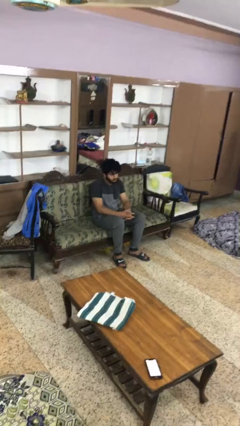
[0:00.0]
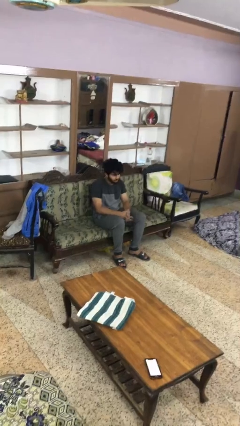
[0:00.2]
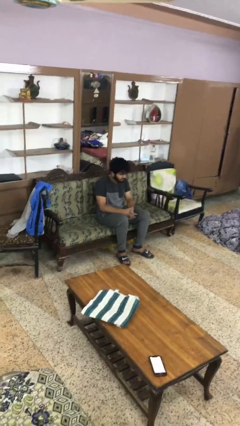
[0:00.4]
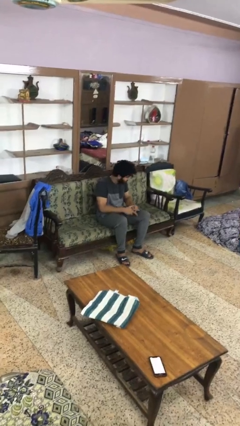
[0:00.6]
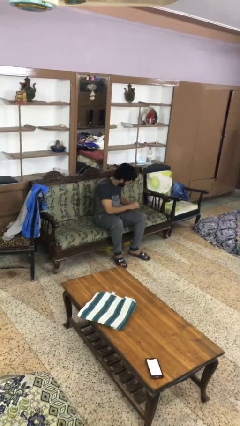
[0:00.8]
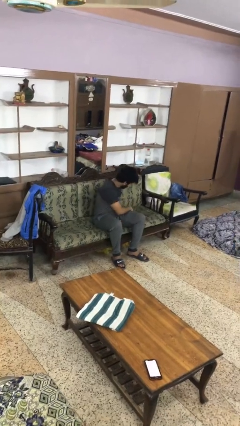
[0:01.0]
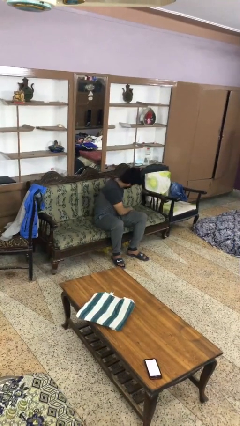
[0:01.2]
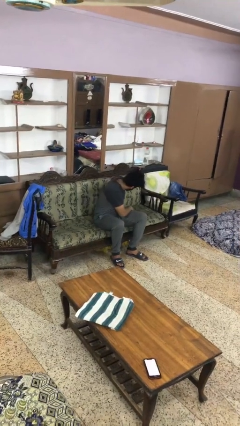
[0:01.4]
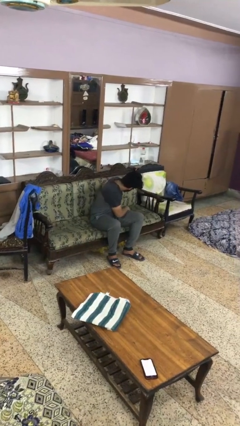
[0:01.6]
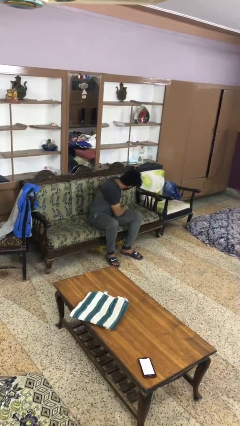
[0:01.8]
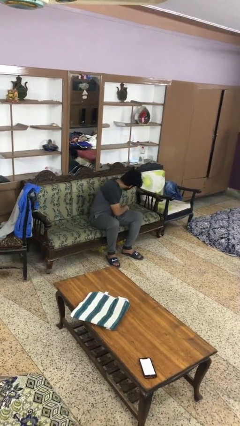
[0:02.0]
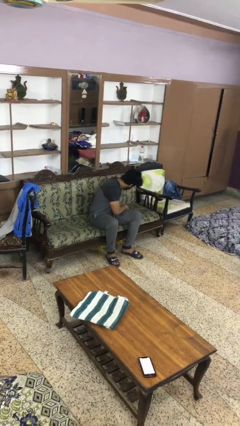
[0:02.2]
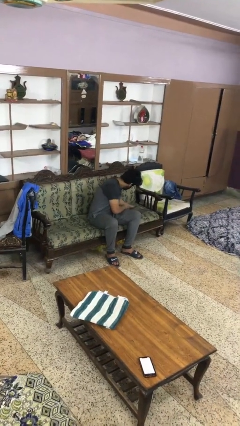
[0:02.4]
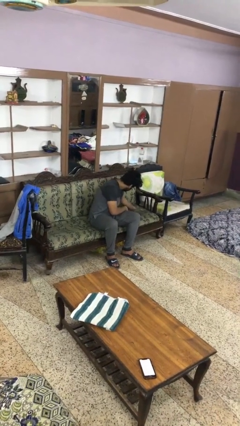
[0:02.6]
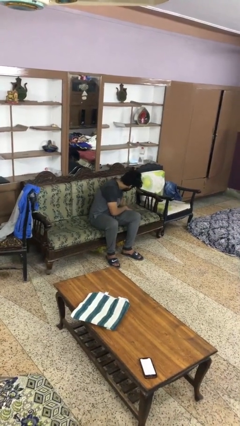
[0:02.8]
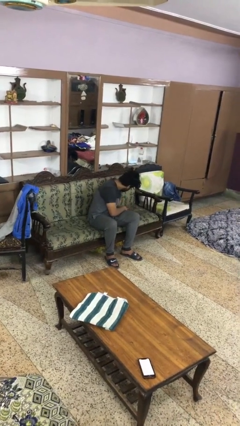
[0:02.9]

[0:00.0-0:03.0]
person searches in couch

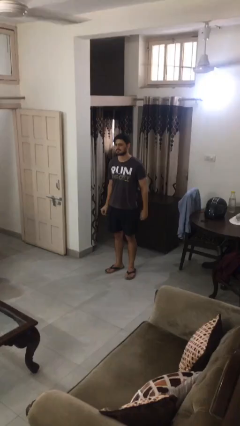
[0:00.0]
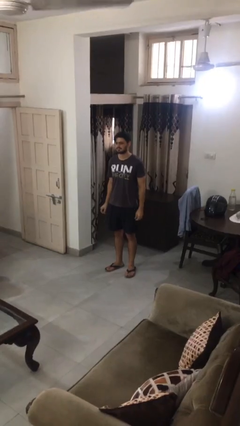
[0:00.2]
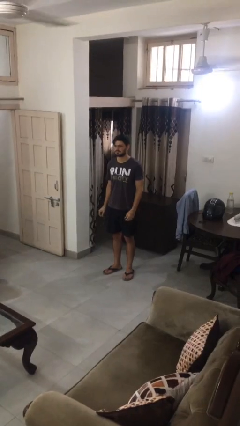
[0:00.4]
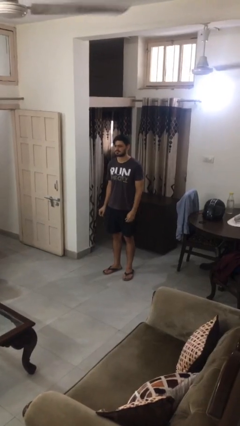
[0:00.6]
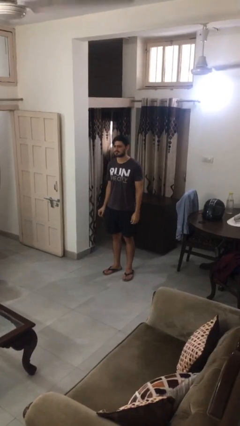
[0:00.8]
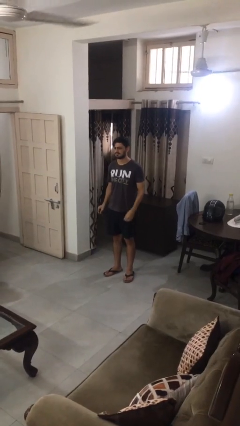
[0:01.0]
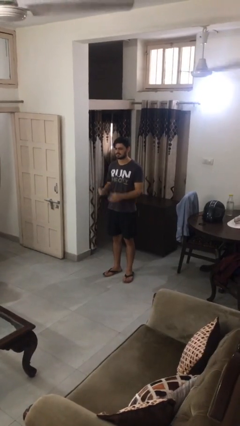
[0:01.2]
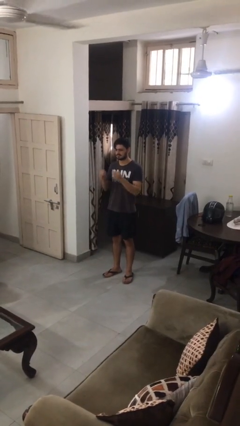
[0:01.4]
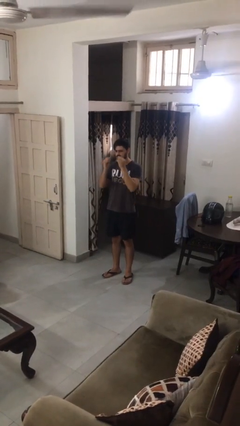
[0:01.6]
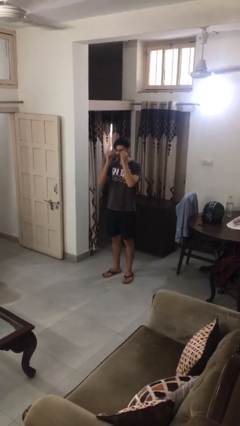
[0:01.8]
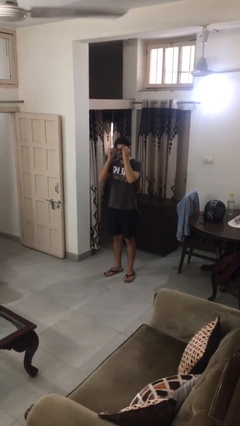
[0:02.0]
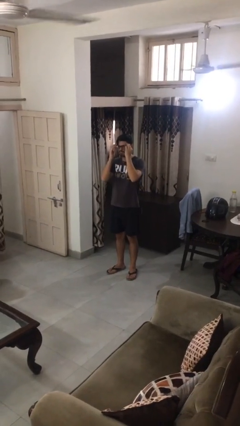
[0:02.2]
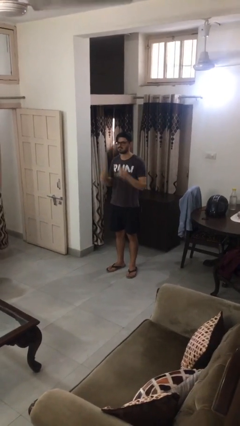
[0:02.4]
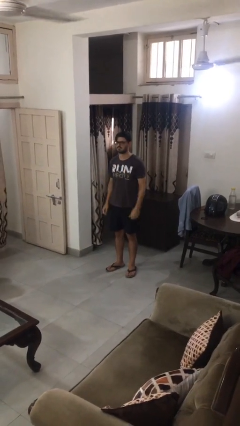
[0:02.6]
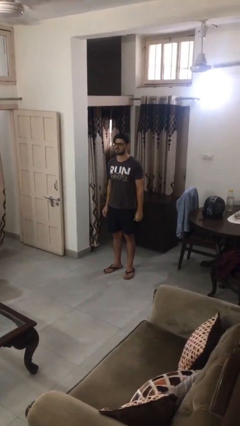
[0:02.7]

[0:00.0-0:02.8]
person puts on glasses

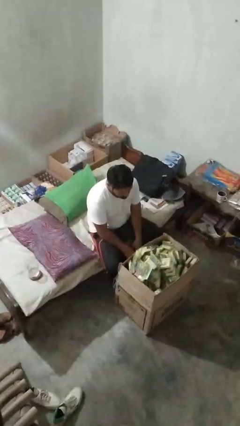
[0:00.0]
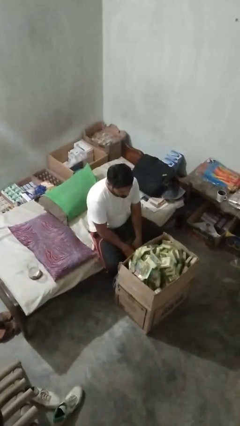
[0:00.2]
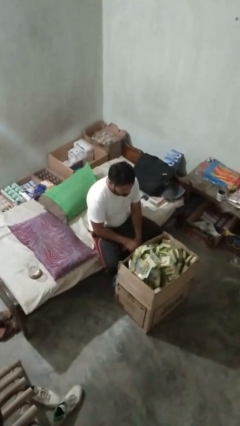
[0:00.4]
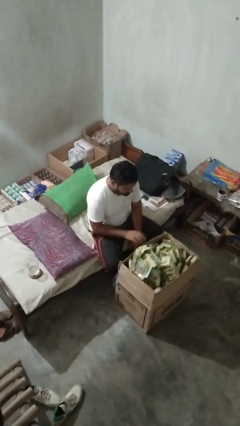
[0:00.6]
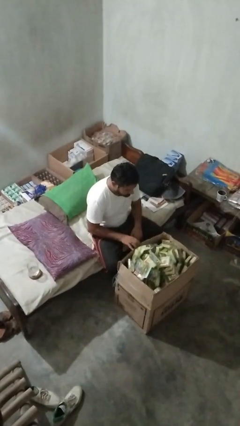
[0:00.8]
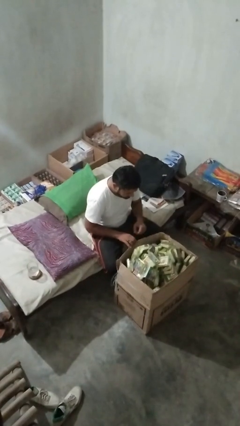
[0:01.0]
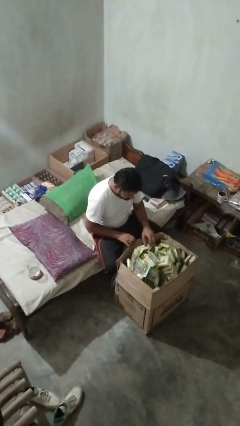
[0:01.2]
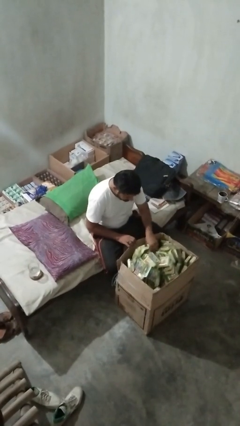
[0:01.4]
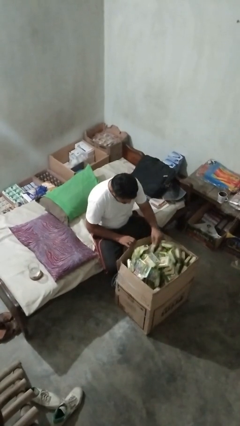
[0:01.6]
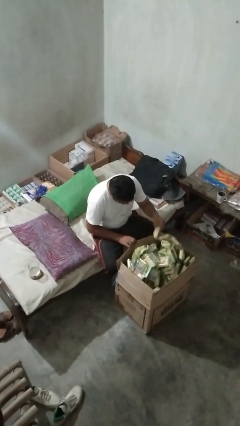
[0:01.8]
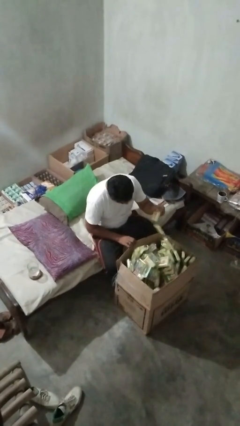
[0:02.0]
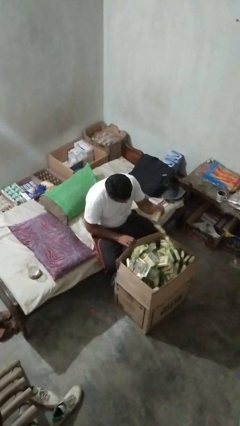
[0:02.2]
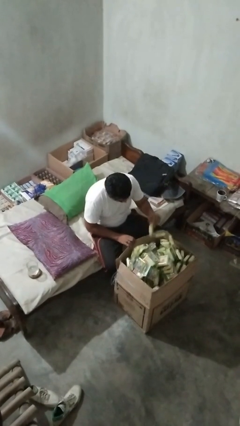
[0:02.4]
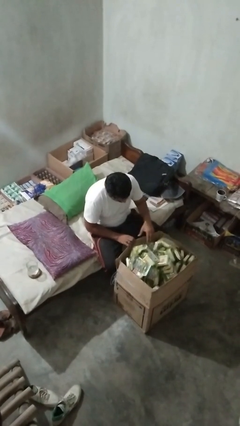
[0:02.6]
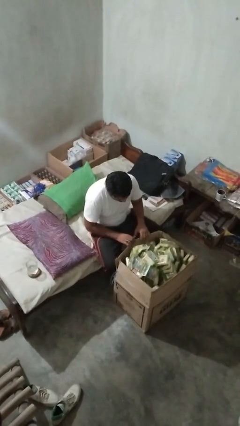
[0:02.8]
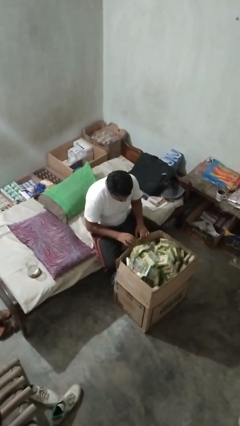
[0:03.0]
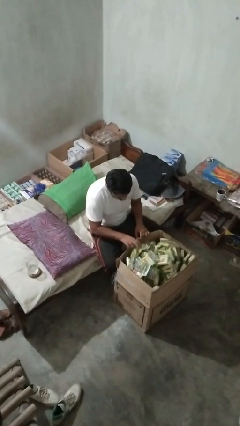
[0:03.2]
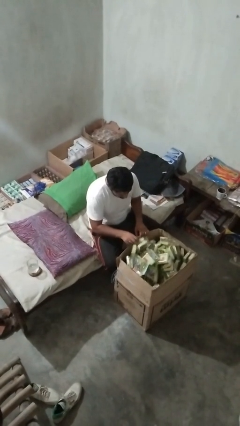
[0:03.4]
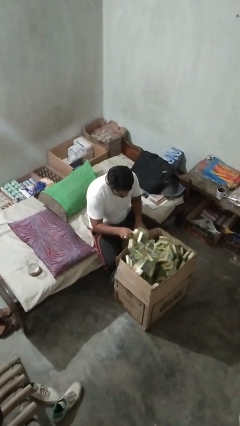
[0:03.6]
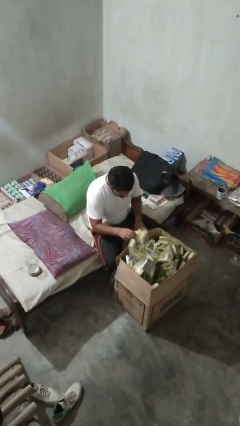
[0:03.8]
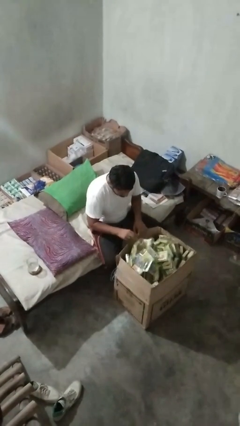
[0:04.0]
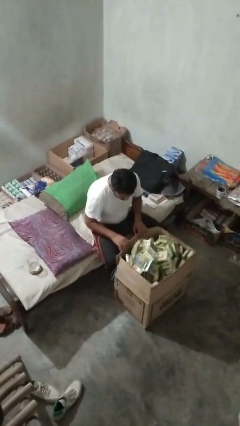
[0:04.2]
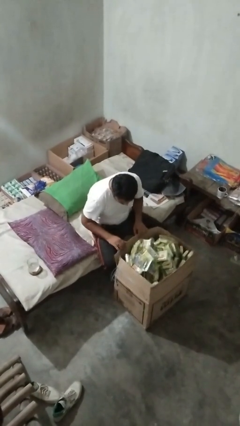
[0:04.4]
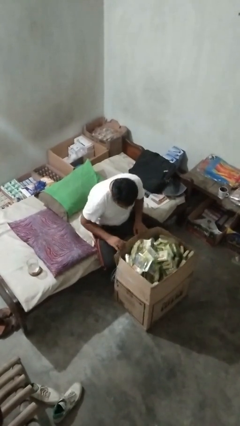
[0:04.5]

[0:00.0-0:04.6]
person searches in box

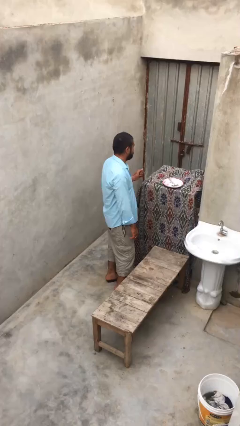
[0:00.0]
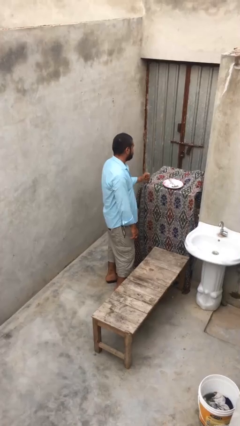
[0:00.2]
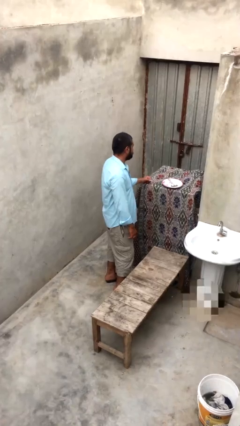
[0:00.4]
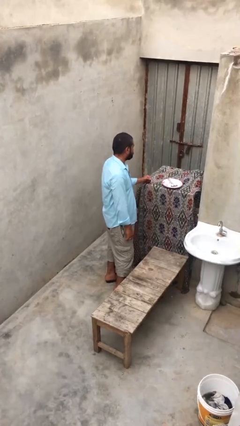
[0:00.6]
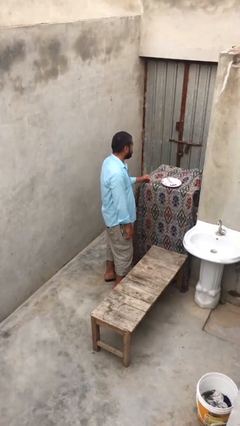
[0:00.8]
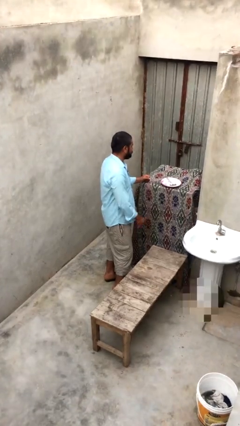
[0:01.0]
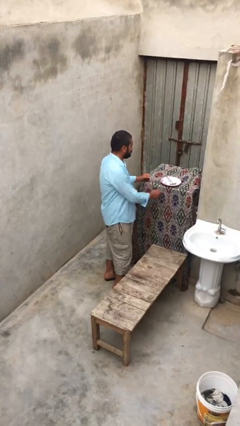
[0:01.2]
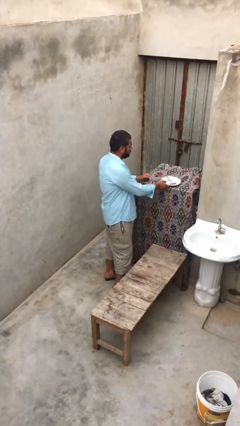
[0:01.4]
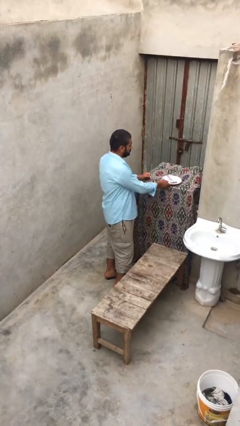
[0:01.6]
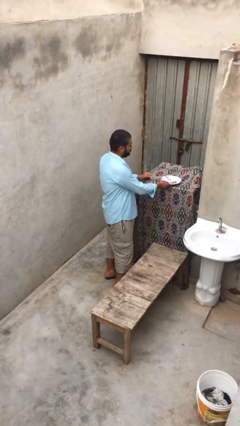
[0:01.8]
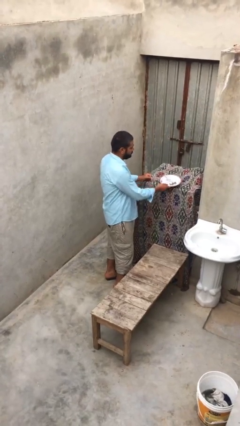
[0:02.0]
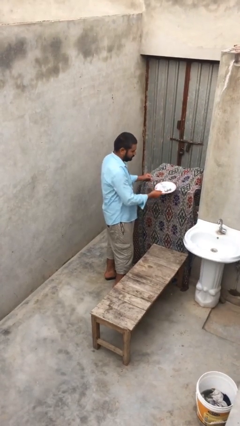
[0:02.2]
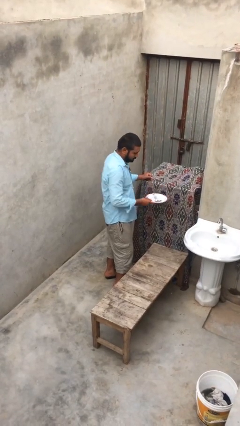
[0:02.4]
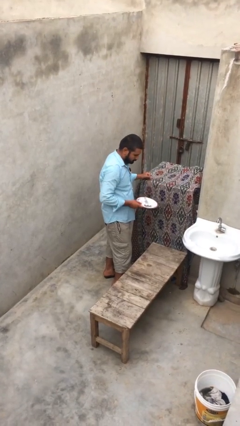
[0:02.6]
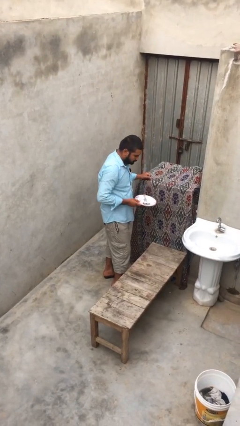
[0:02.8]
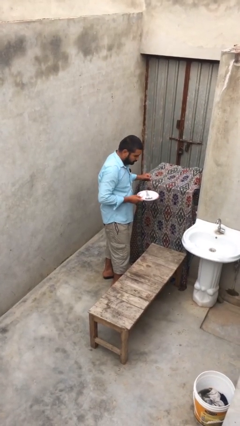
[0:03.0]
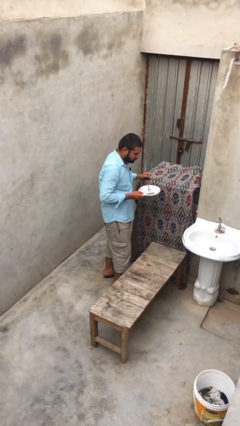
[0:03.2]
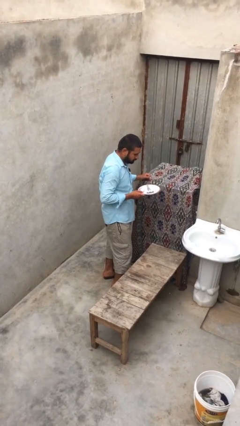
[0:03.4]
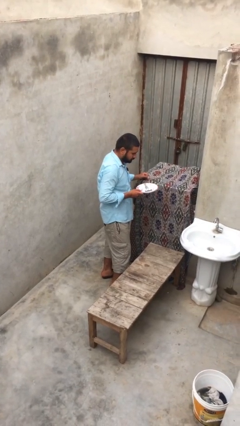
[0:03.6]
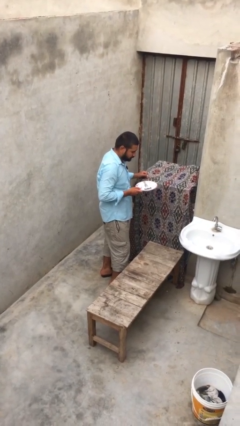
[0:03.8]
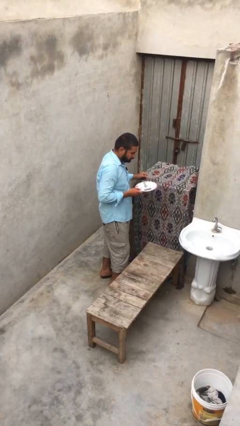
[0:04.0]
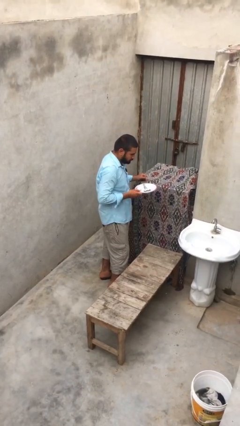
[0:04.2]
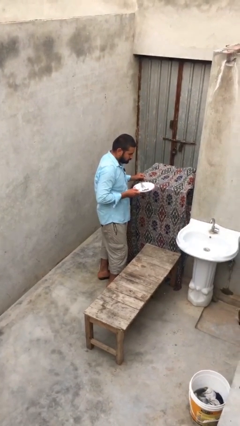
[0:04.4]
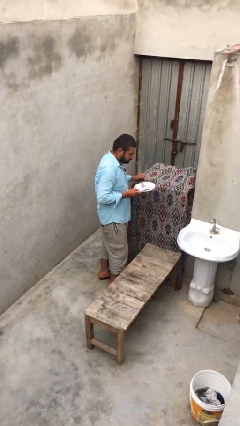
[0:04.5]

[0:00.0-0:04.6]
person picks up object from shelf

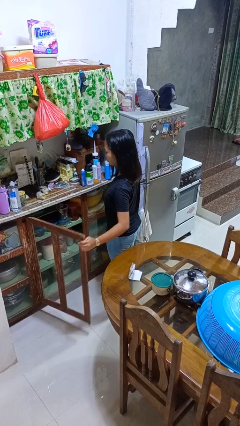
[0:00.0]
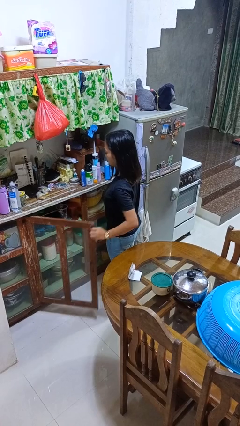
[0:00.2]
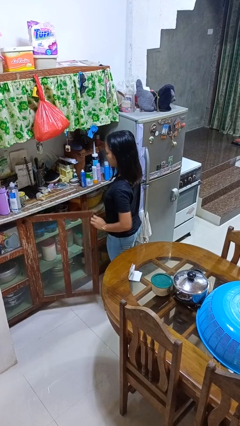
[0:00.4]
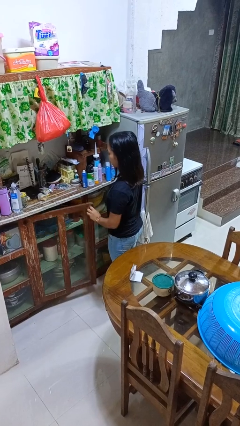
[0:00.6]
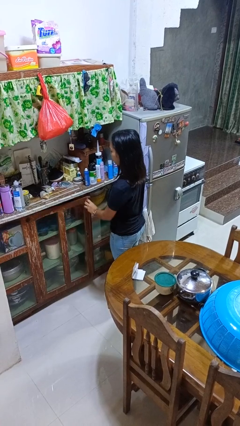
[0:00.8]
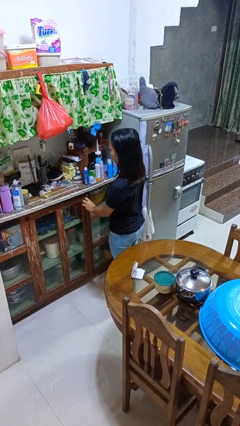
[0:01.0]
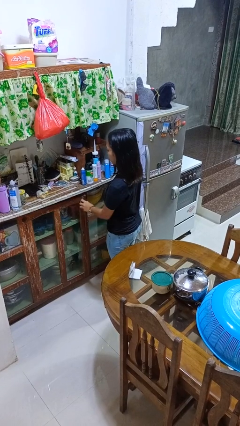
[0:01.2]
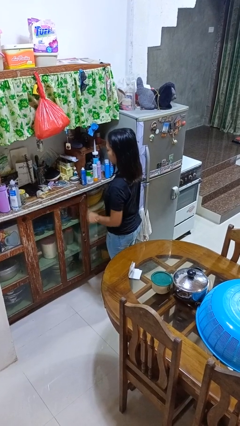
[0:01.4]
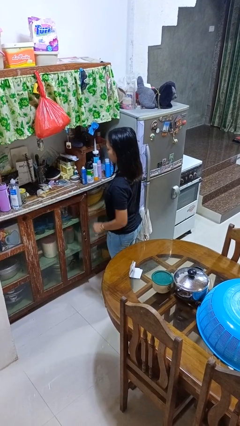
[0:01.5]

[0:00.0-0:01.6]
person closes cabinet

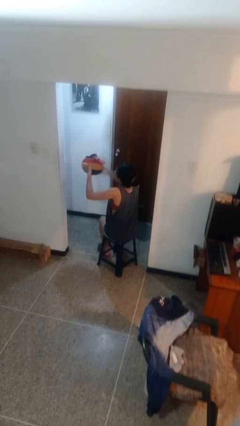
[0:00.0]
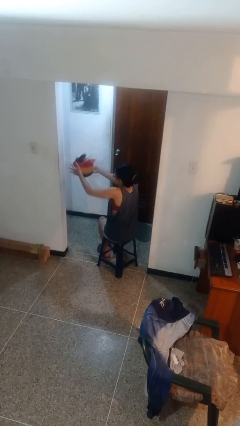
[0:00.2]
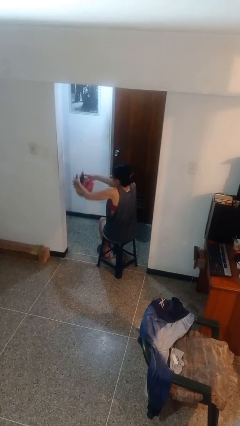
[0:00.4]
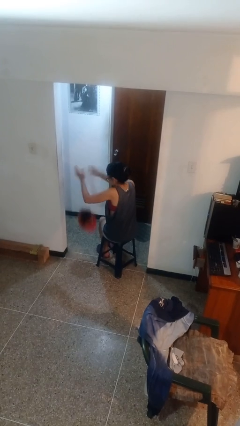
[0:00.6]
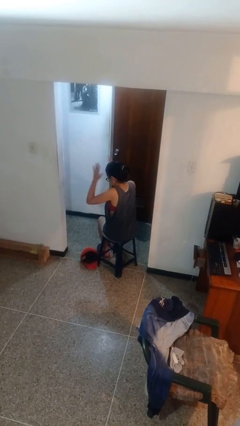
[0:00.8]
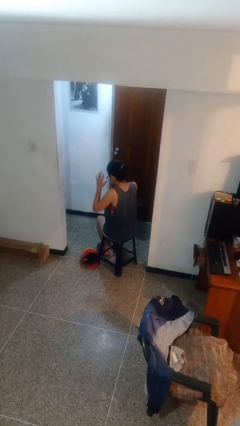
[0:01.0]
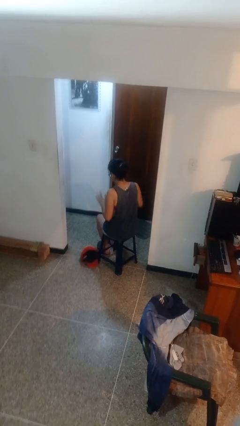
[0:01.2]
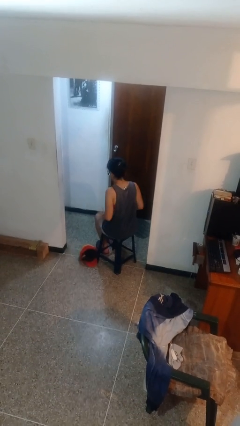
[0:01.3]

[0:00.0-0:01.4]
person catches dropped object
